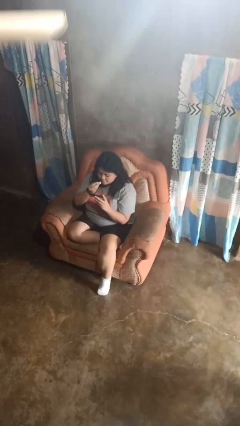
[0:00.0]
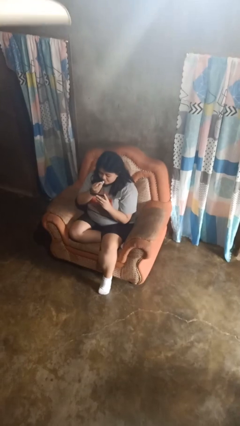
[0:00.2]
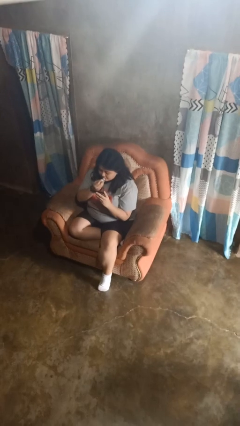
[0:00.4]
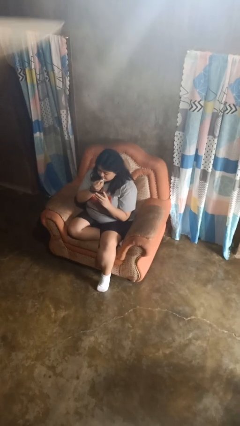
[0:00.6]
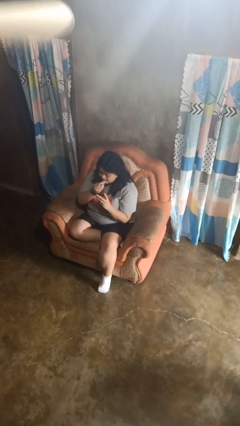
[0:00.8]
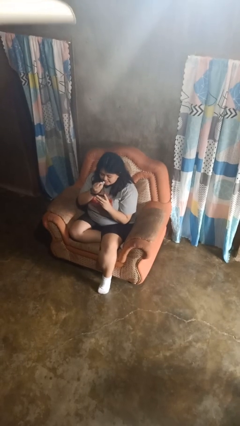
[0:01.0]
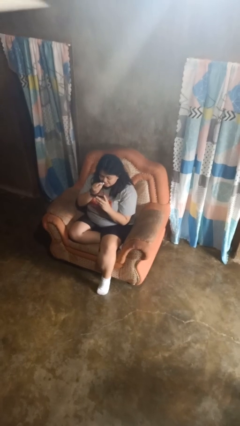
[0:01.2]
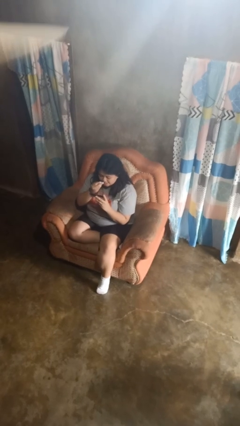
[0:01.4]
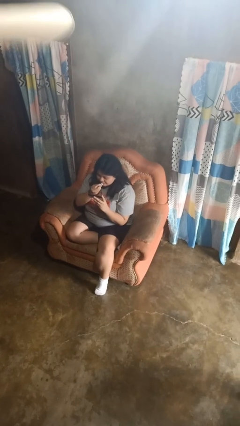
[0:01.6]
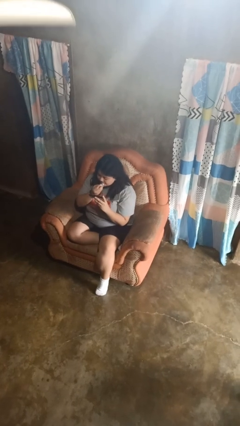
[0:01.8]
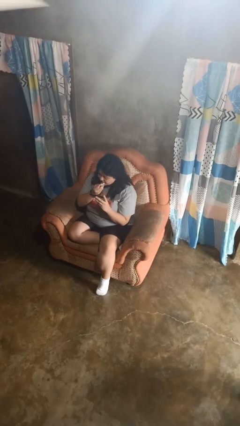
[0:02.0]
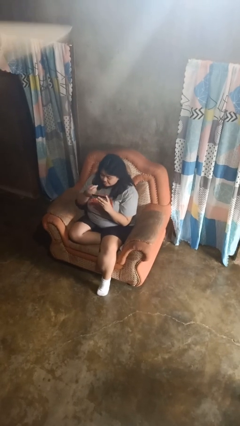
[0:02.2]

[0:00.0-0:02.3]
person applies lip makeup

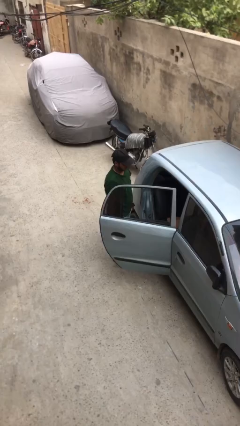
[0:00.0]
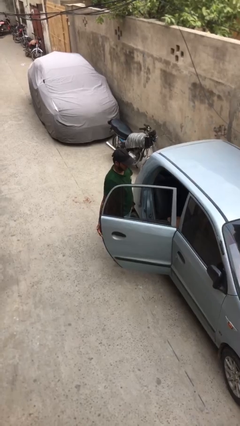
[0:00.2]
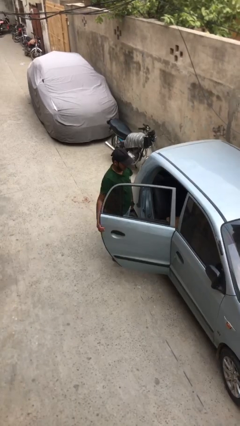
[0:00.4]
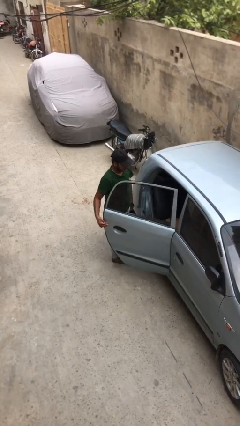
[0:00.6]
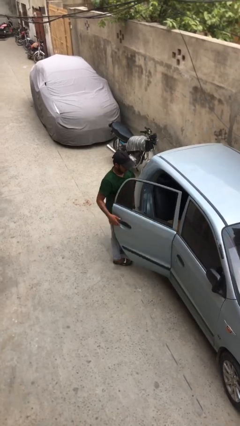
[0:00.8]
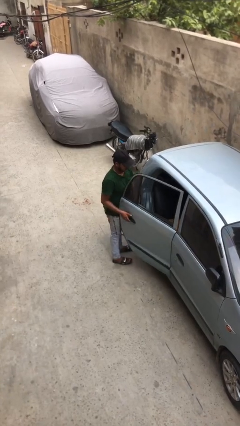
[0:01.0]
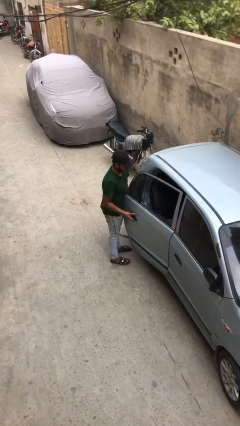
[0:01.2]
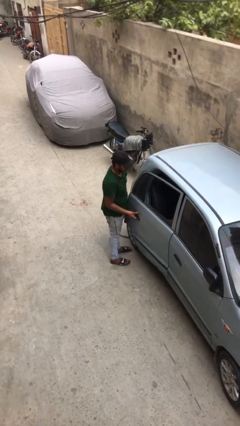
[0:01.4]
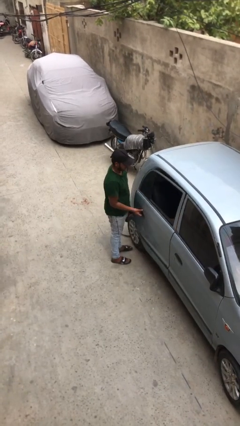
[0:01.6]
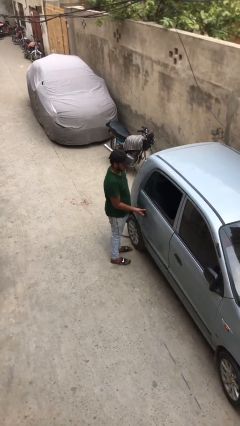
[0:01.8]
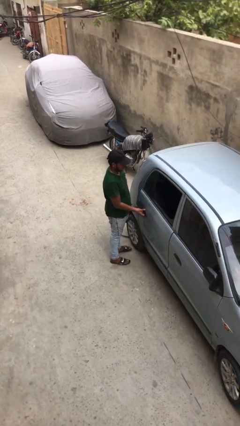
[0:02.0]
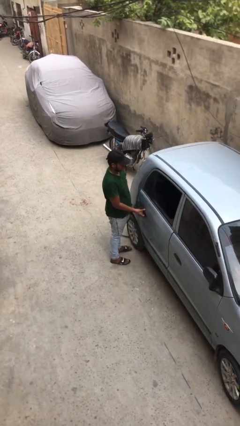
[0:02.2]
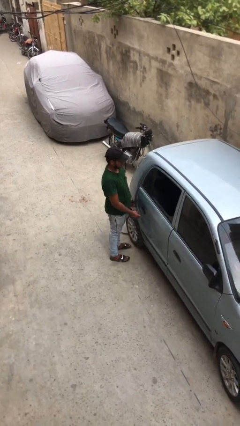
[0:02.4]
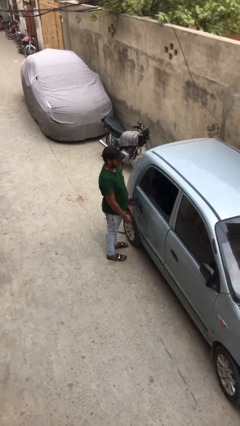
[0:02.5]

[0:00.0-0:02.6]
person closes car door

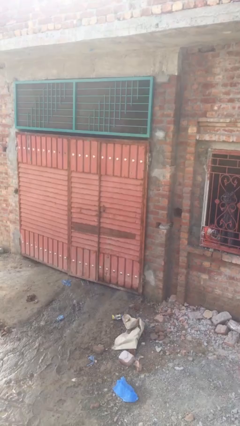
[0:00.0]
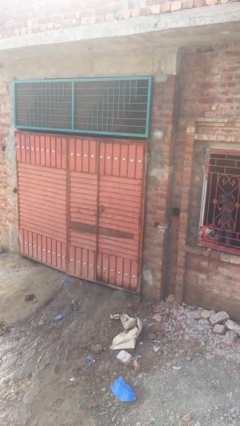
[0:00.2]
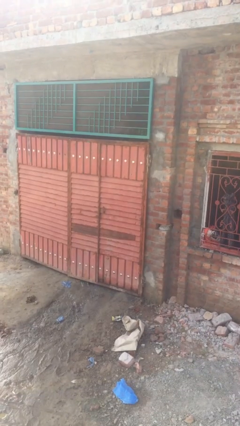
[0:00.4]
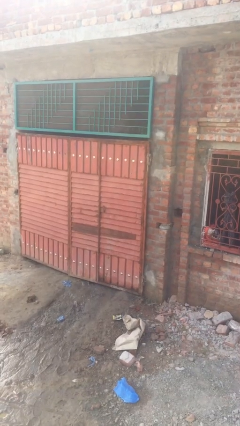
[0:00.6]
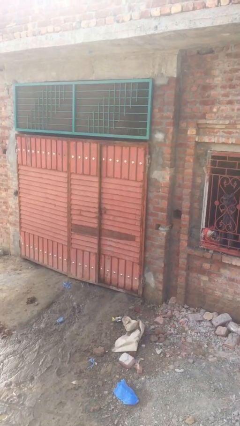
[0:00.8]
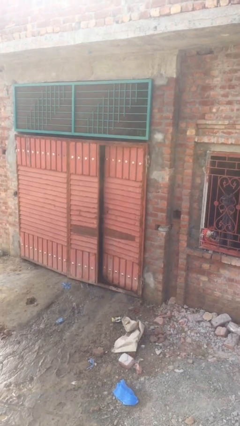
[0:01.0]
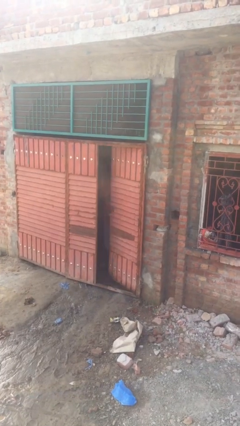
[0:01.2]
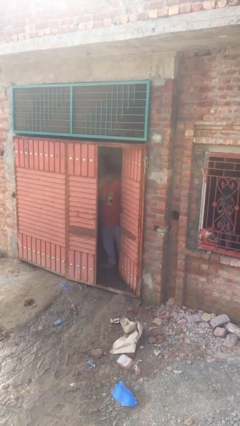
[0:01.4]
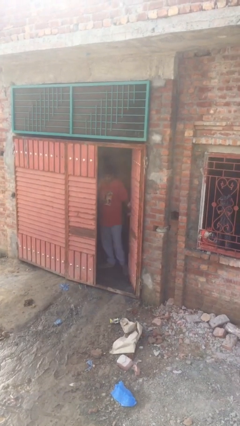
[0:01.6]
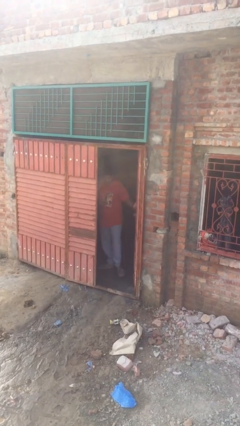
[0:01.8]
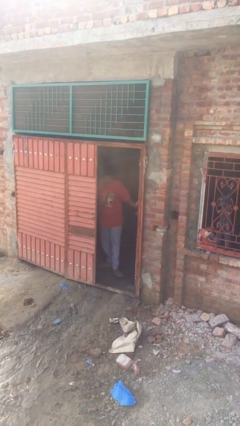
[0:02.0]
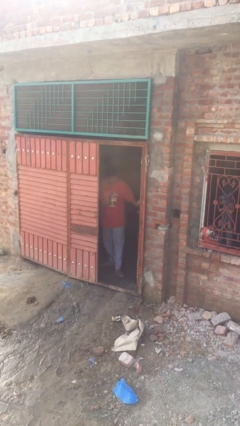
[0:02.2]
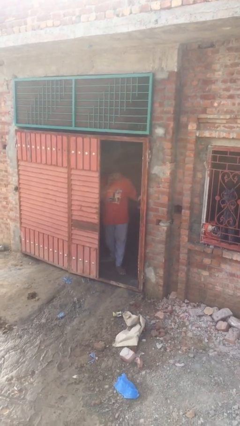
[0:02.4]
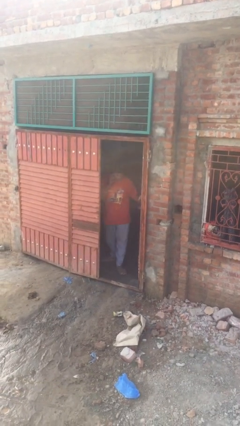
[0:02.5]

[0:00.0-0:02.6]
person opens facility door

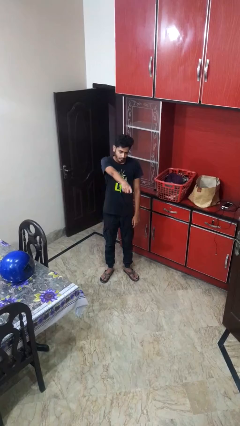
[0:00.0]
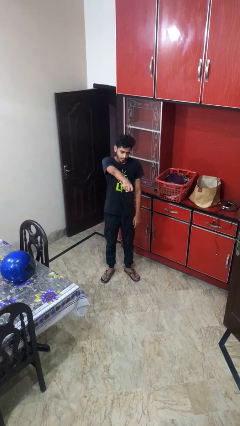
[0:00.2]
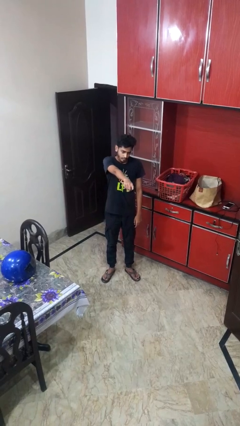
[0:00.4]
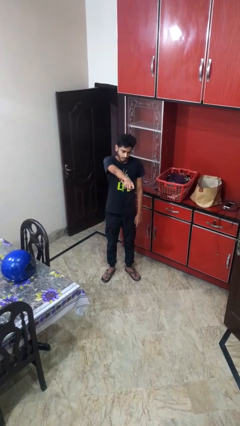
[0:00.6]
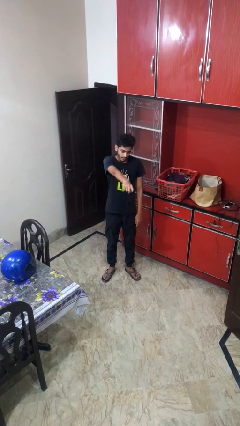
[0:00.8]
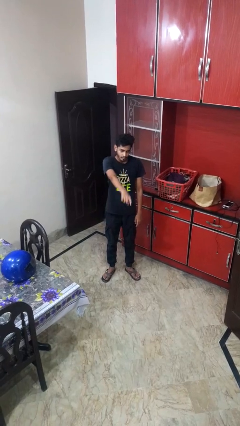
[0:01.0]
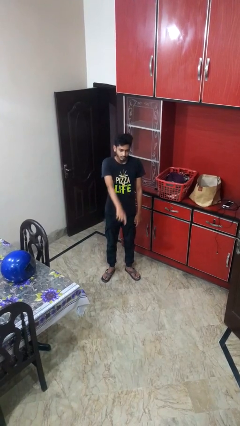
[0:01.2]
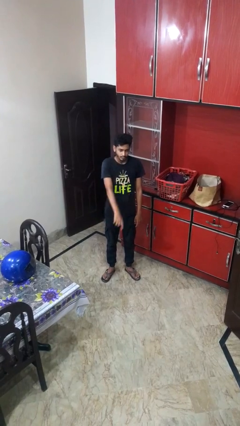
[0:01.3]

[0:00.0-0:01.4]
person points at person

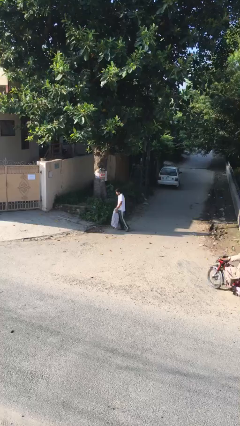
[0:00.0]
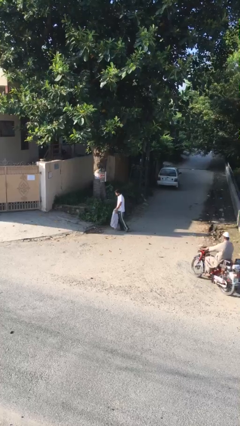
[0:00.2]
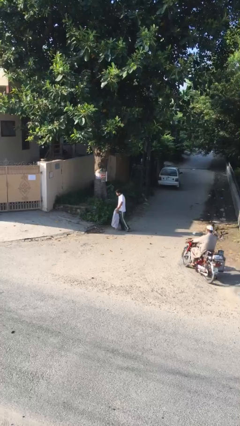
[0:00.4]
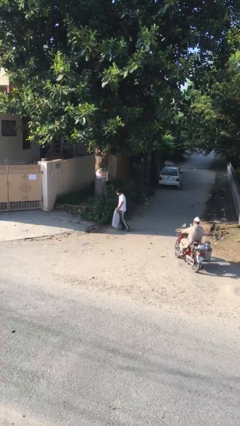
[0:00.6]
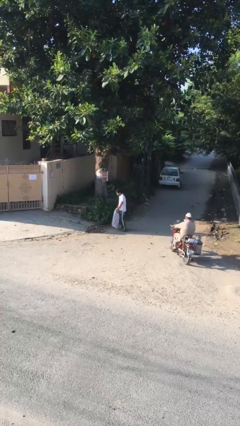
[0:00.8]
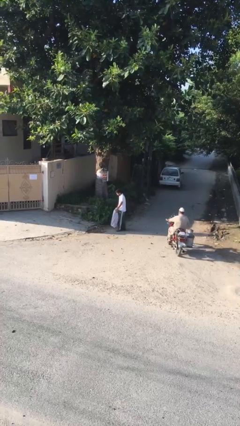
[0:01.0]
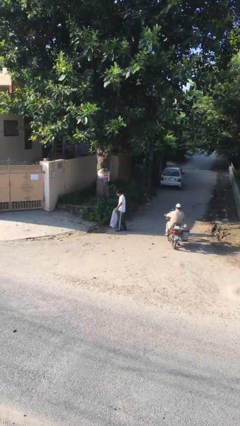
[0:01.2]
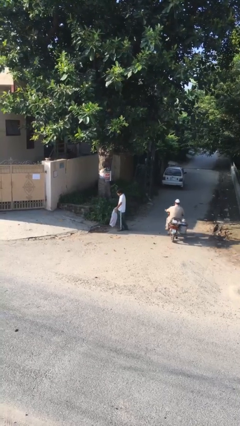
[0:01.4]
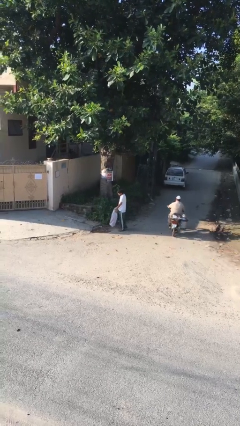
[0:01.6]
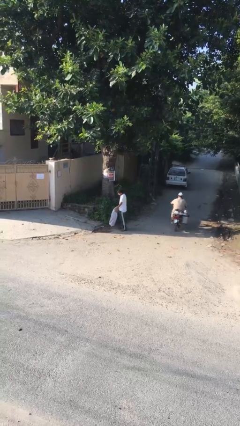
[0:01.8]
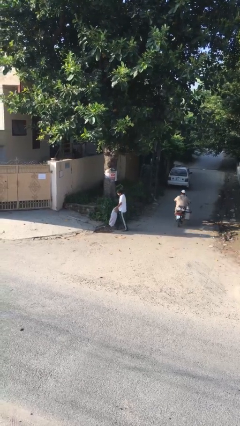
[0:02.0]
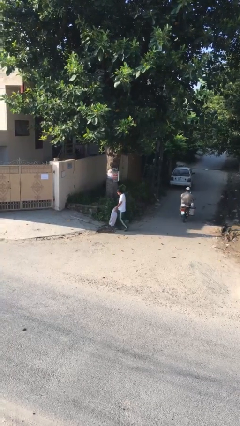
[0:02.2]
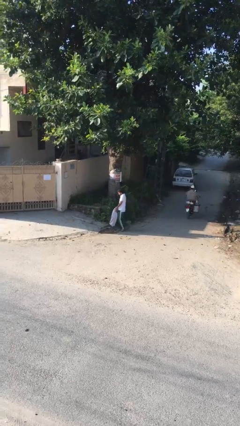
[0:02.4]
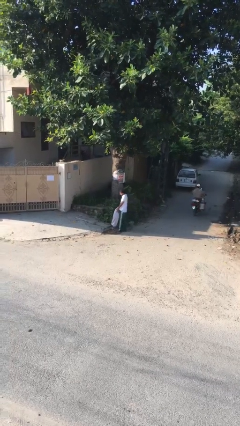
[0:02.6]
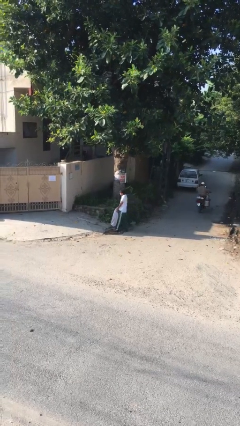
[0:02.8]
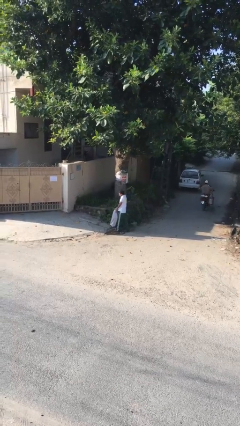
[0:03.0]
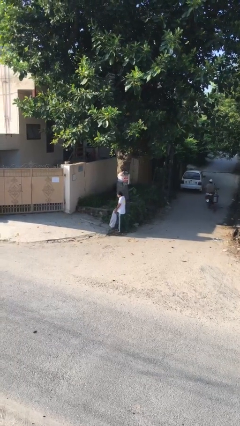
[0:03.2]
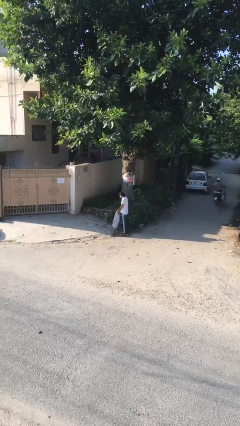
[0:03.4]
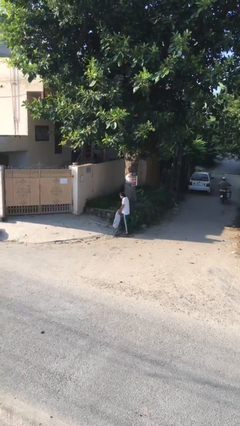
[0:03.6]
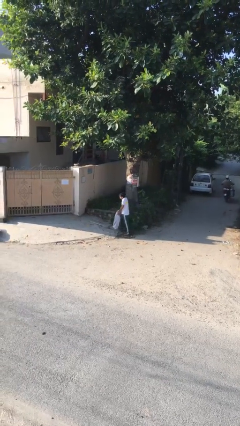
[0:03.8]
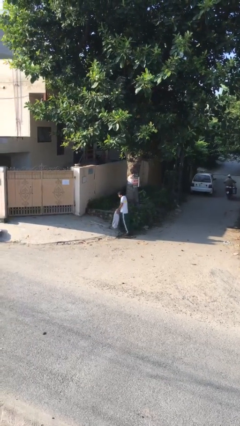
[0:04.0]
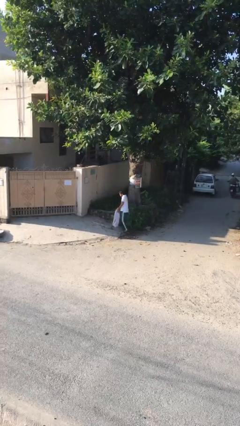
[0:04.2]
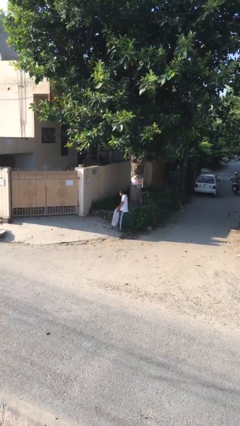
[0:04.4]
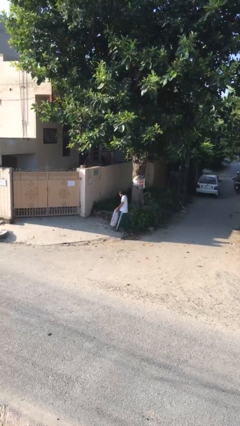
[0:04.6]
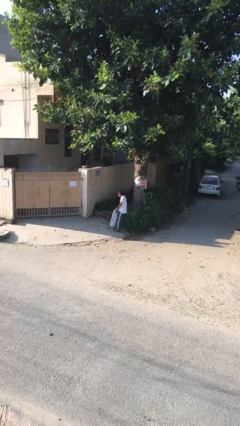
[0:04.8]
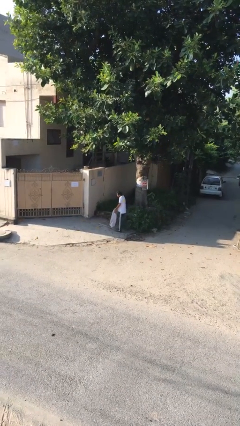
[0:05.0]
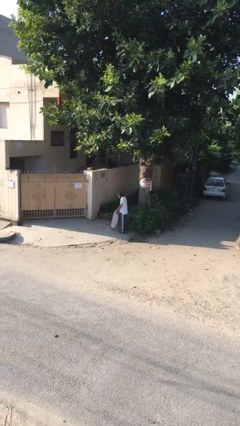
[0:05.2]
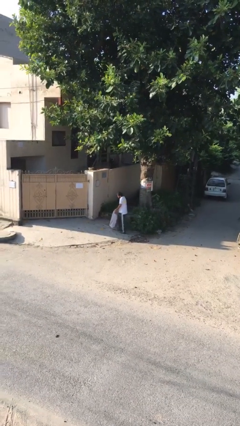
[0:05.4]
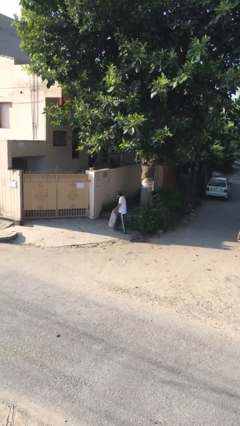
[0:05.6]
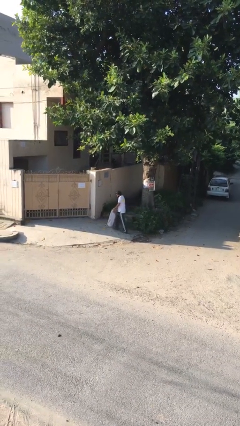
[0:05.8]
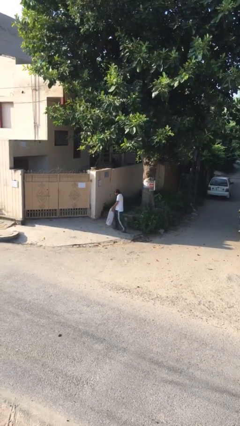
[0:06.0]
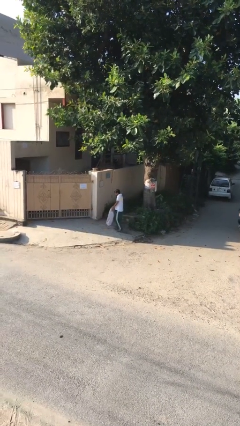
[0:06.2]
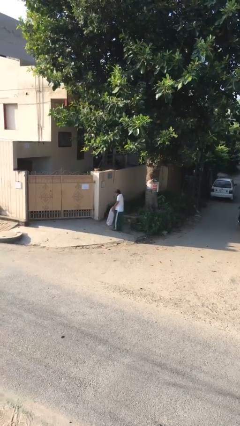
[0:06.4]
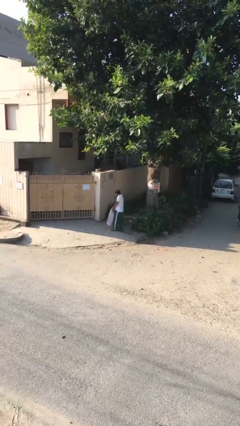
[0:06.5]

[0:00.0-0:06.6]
person carries heavy object

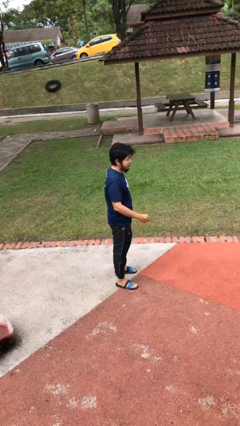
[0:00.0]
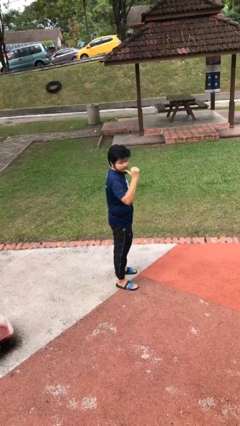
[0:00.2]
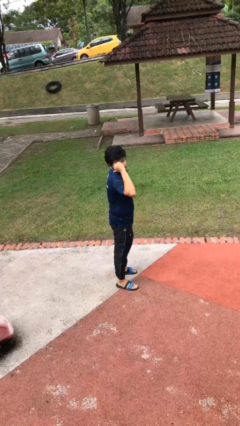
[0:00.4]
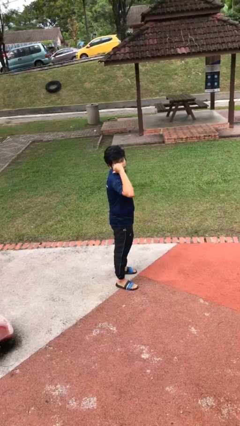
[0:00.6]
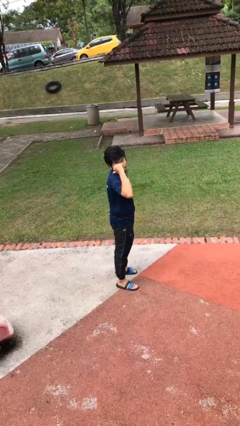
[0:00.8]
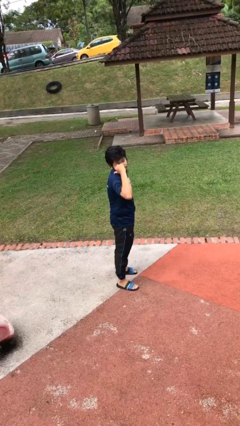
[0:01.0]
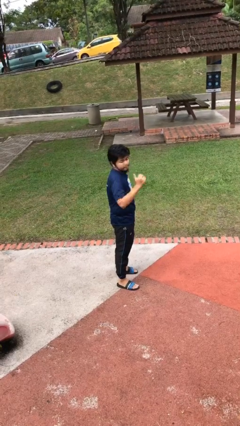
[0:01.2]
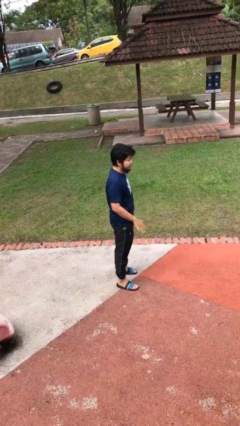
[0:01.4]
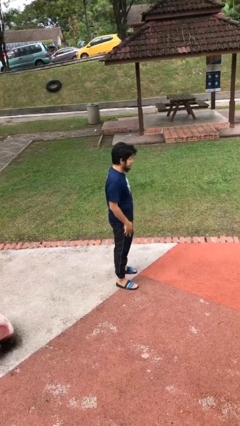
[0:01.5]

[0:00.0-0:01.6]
person gestures behind me

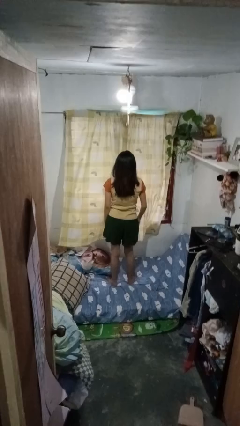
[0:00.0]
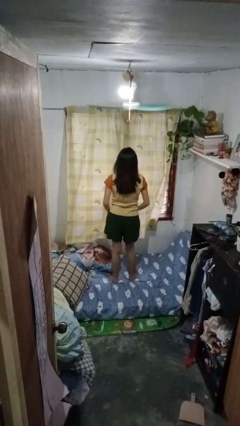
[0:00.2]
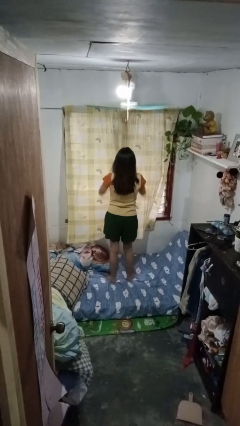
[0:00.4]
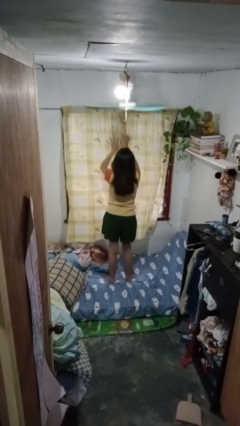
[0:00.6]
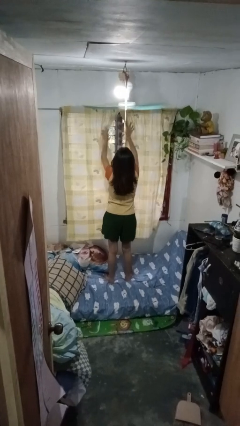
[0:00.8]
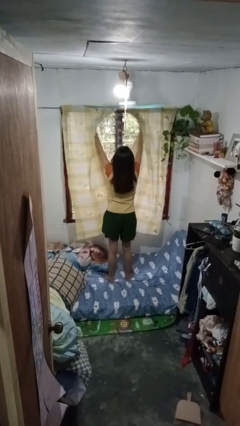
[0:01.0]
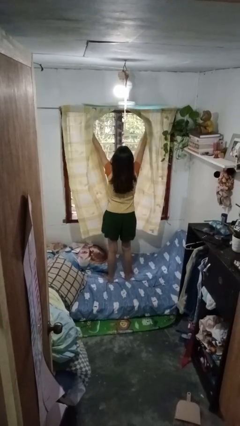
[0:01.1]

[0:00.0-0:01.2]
person opens curtains
